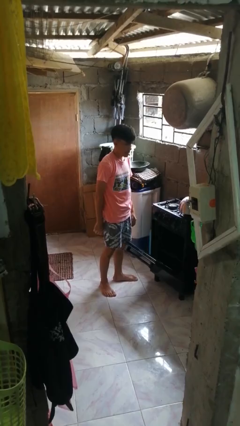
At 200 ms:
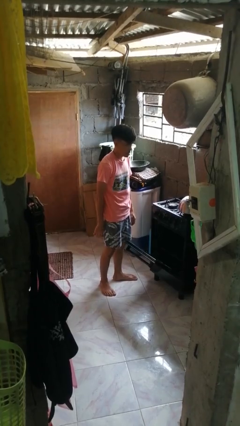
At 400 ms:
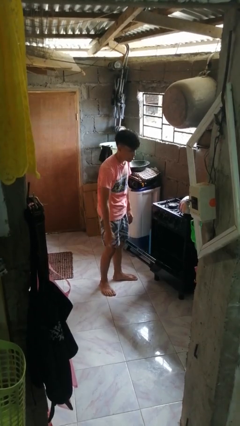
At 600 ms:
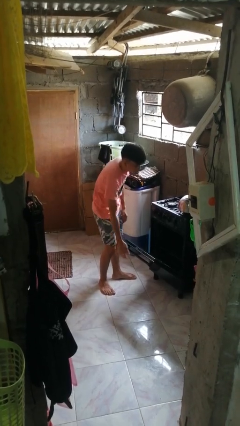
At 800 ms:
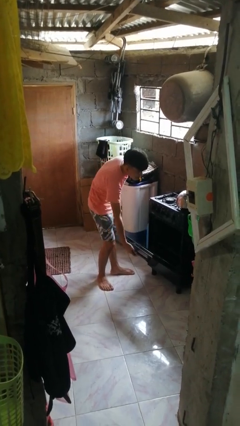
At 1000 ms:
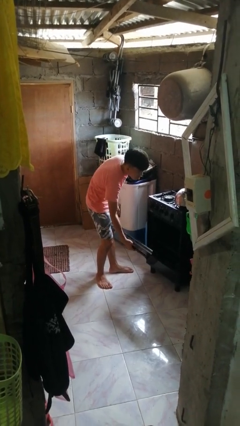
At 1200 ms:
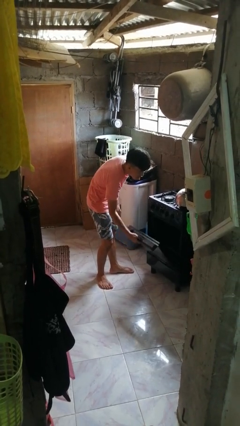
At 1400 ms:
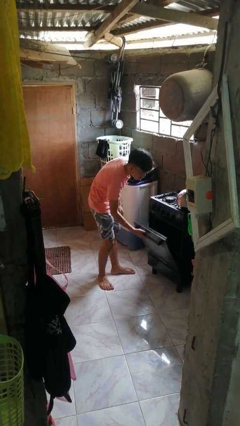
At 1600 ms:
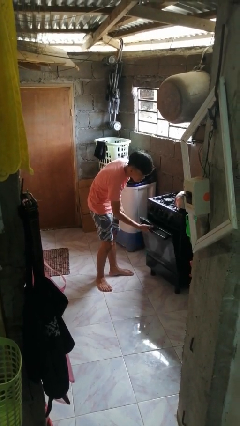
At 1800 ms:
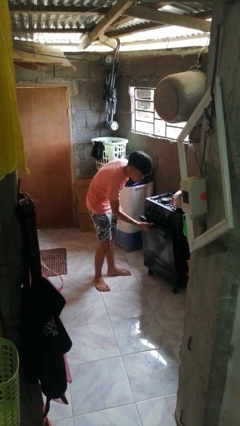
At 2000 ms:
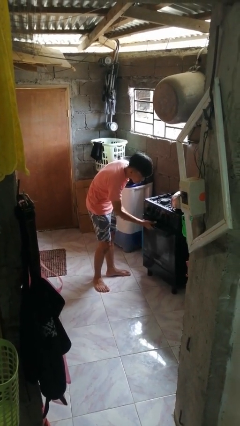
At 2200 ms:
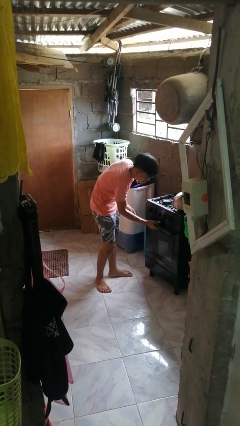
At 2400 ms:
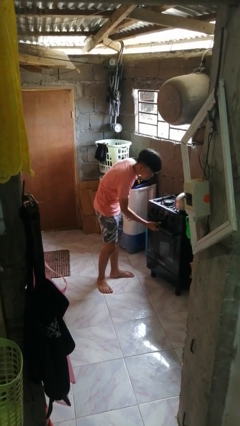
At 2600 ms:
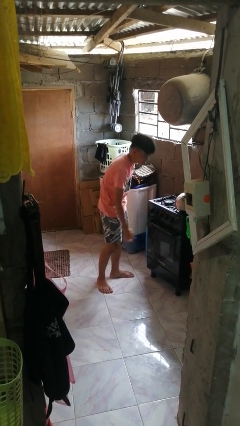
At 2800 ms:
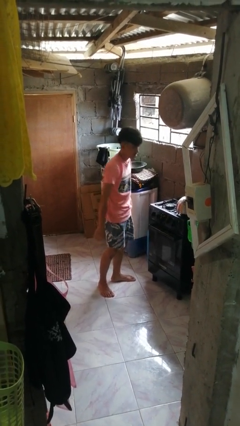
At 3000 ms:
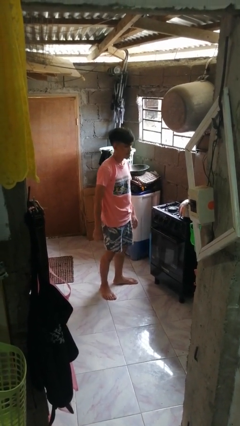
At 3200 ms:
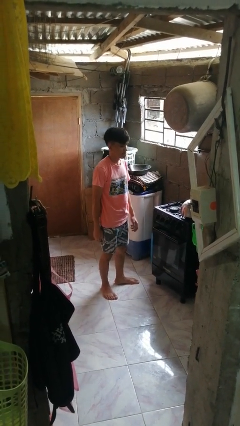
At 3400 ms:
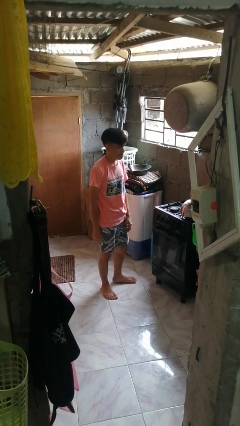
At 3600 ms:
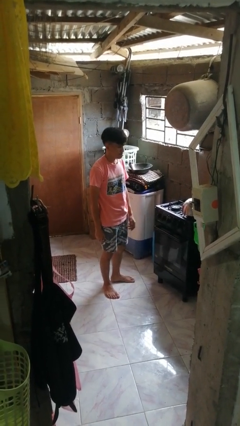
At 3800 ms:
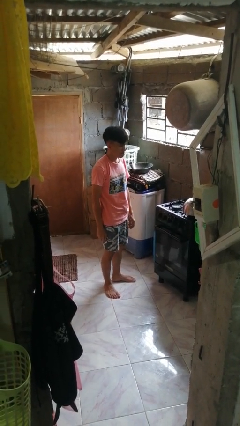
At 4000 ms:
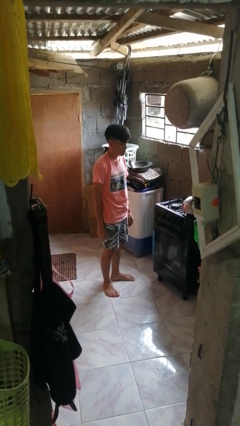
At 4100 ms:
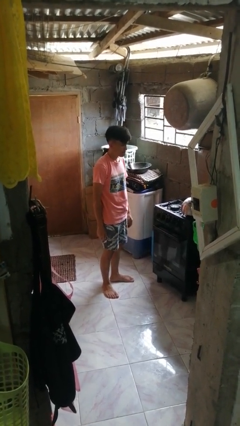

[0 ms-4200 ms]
person closes oven door

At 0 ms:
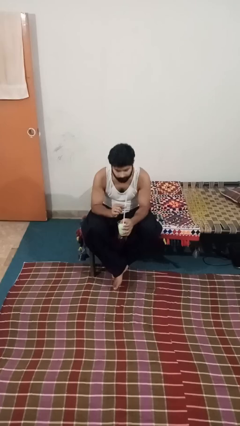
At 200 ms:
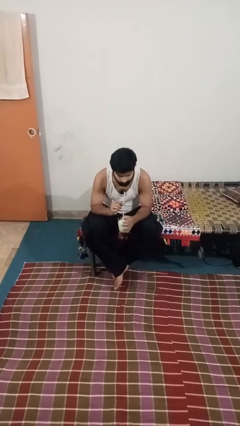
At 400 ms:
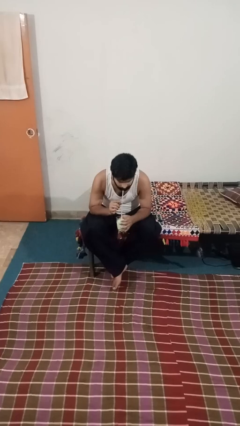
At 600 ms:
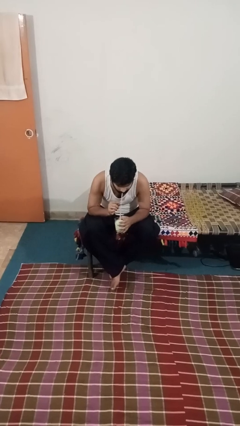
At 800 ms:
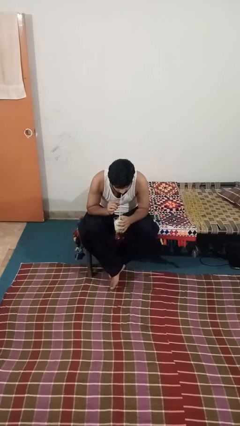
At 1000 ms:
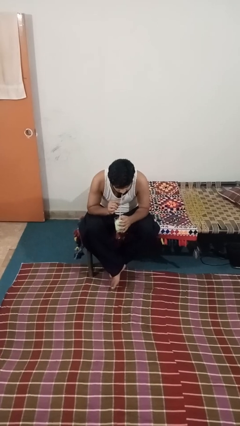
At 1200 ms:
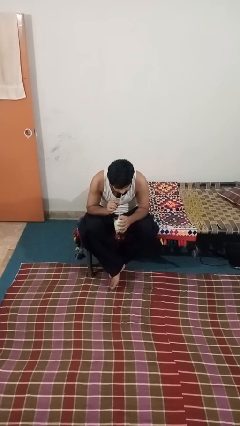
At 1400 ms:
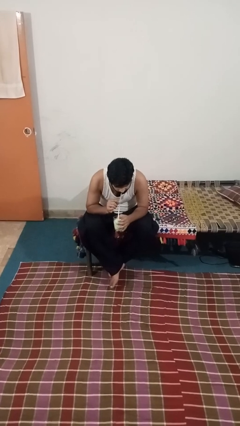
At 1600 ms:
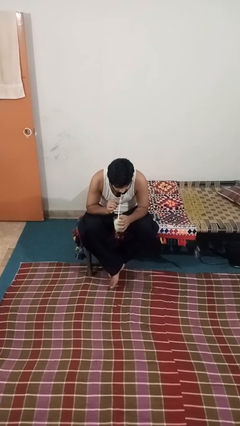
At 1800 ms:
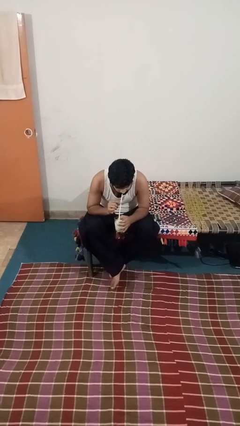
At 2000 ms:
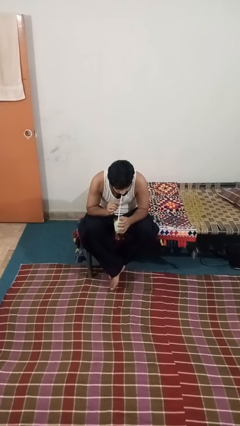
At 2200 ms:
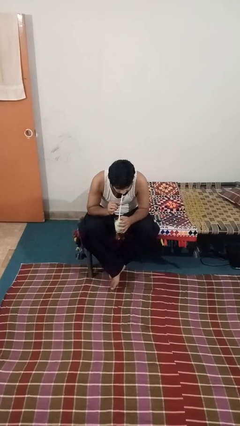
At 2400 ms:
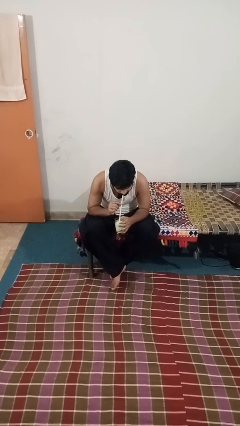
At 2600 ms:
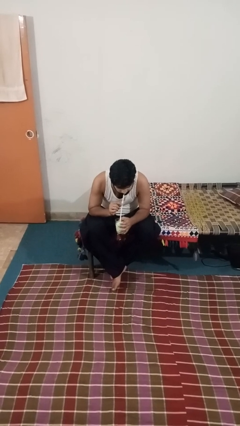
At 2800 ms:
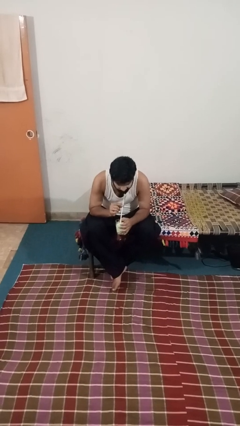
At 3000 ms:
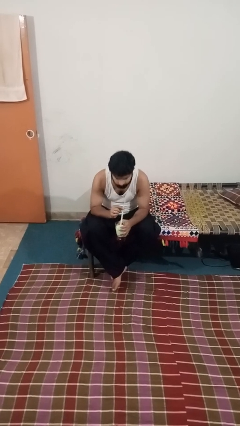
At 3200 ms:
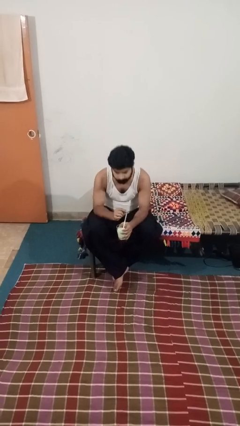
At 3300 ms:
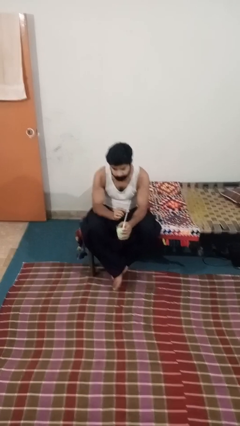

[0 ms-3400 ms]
person drinks from straw

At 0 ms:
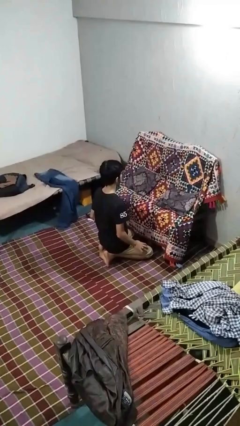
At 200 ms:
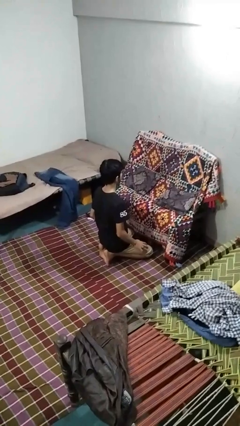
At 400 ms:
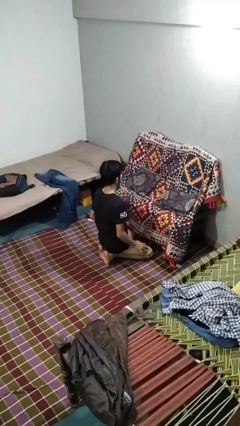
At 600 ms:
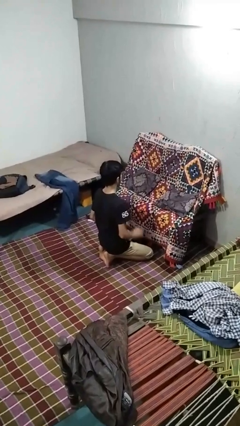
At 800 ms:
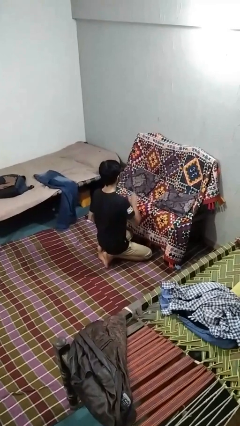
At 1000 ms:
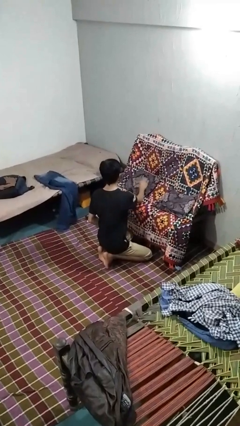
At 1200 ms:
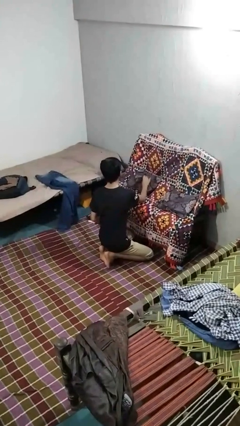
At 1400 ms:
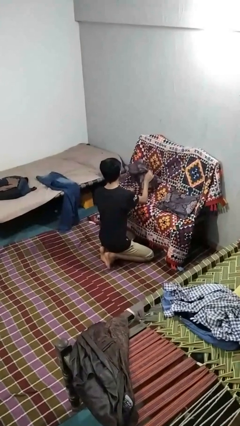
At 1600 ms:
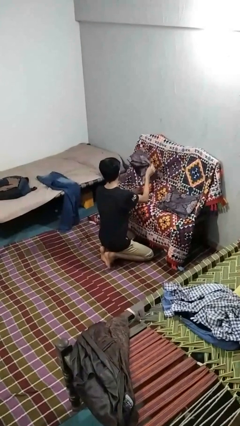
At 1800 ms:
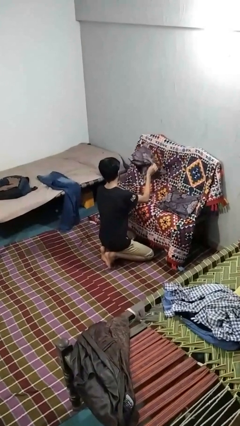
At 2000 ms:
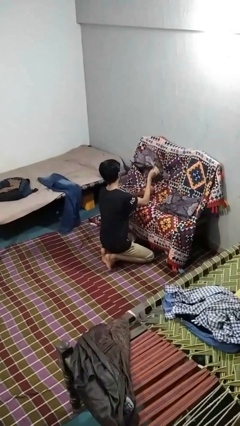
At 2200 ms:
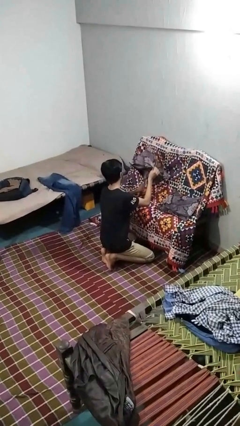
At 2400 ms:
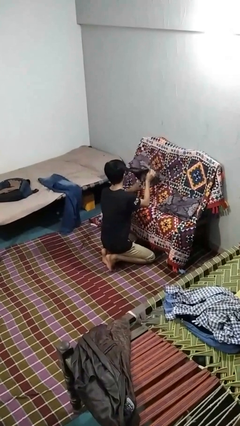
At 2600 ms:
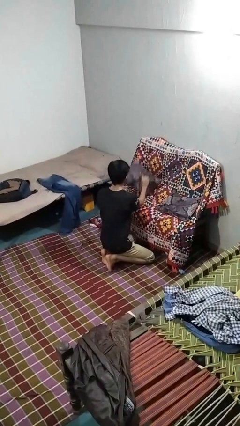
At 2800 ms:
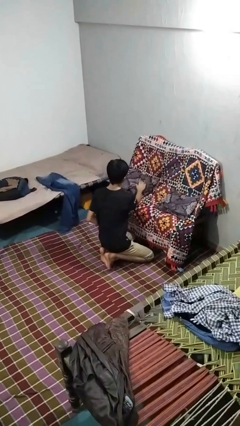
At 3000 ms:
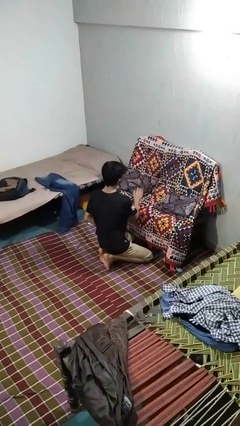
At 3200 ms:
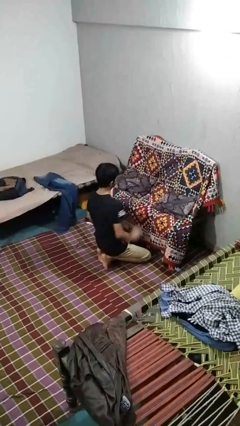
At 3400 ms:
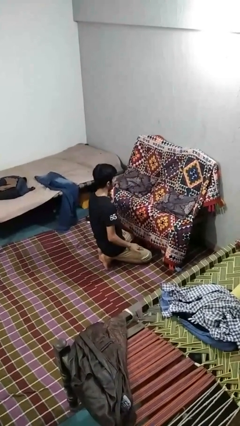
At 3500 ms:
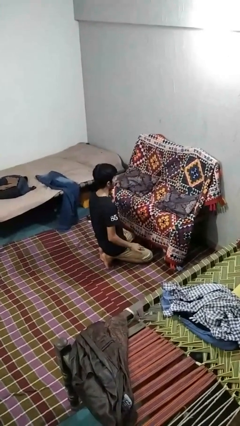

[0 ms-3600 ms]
person searches in couch

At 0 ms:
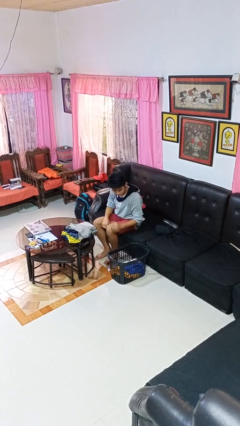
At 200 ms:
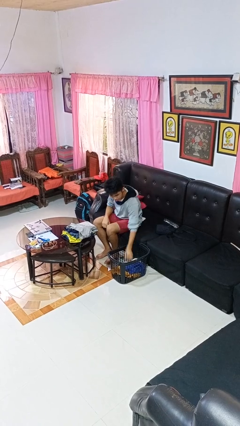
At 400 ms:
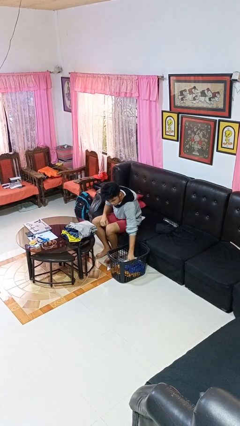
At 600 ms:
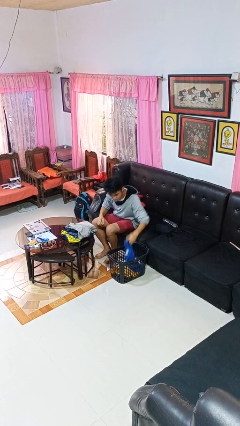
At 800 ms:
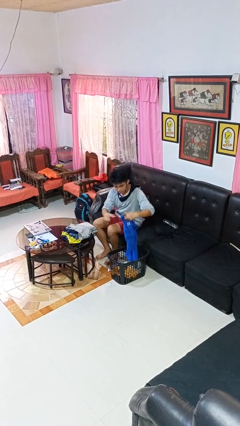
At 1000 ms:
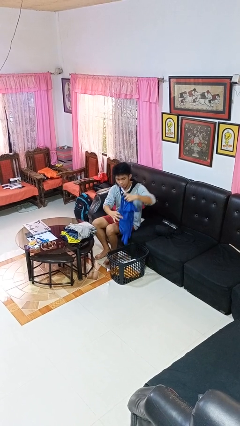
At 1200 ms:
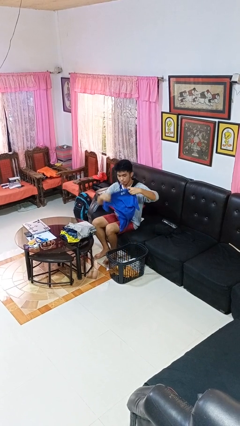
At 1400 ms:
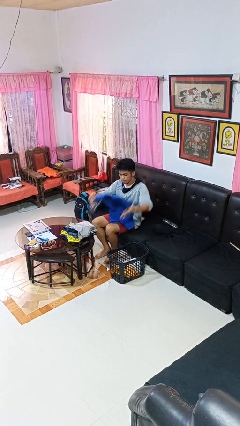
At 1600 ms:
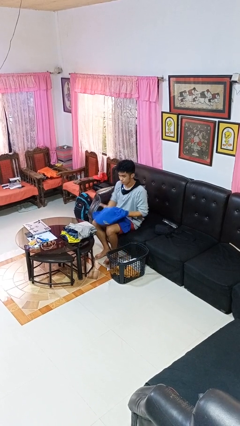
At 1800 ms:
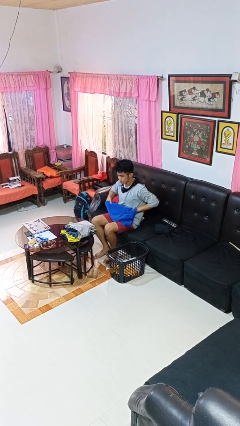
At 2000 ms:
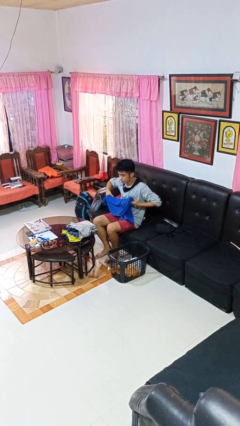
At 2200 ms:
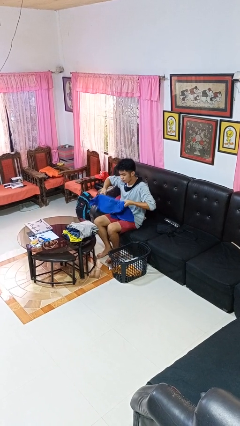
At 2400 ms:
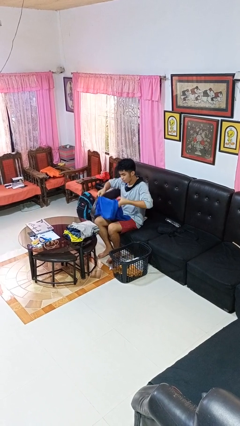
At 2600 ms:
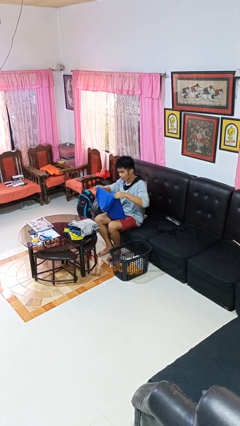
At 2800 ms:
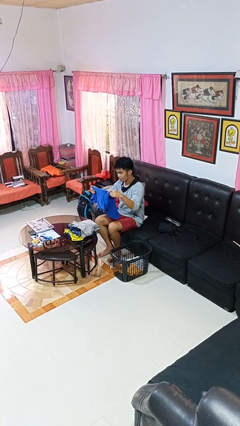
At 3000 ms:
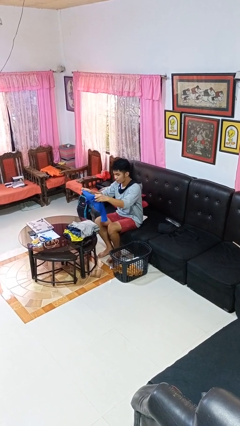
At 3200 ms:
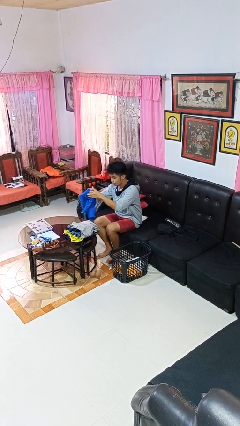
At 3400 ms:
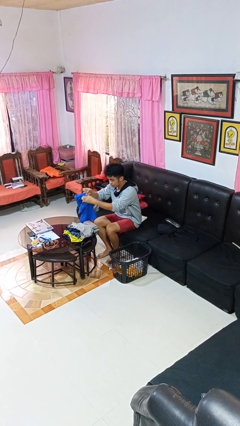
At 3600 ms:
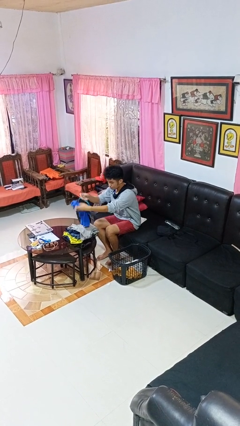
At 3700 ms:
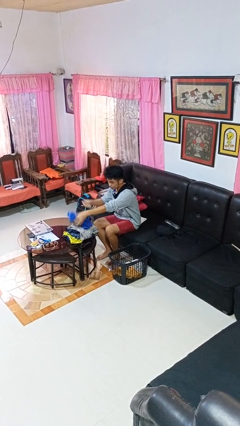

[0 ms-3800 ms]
person folds shirt

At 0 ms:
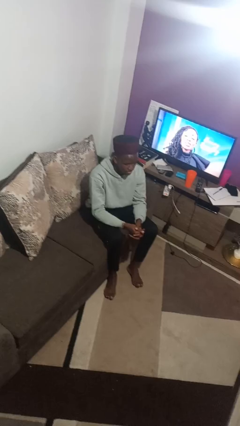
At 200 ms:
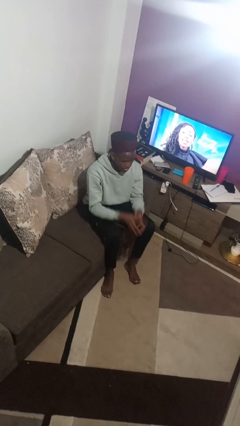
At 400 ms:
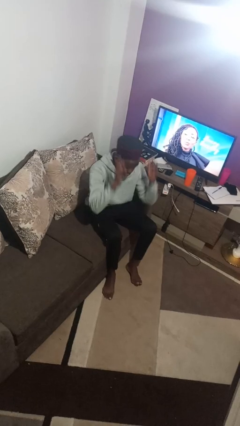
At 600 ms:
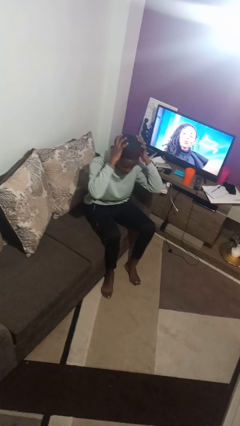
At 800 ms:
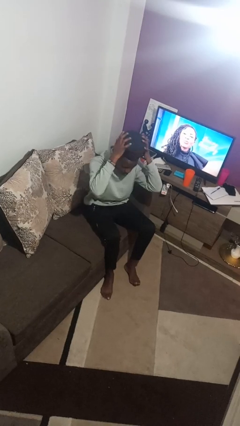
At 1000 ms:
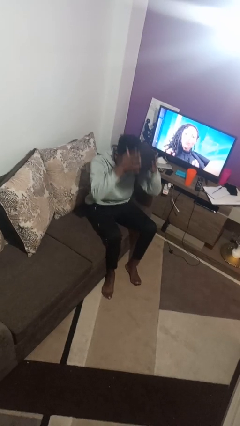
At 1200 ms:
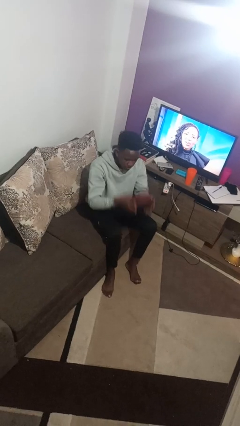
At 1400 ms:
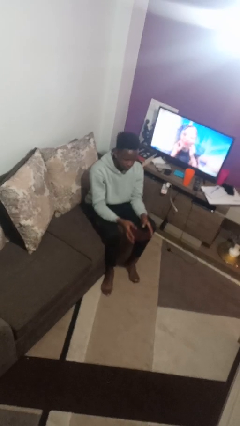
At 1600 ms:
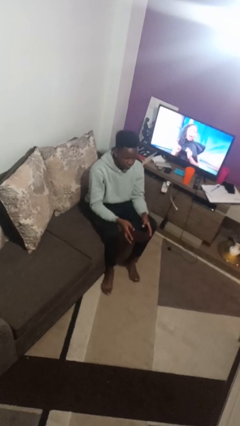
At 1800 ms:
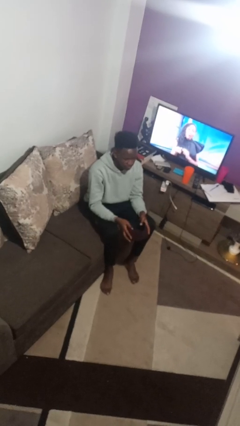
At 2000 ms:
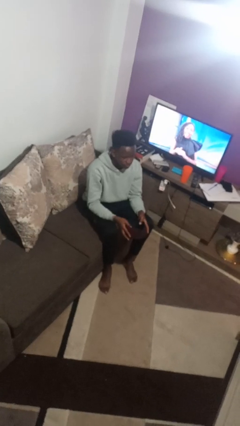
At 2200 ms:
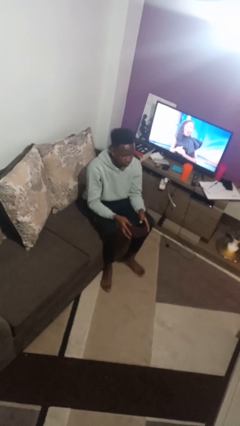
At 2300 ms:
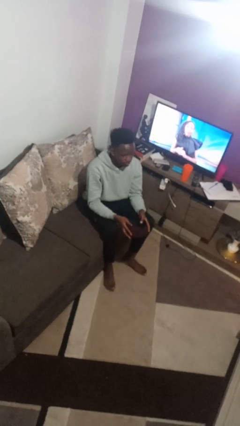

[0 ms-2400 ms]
person takes off hat
